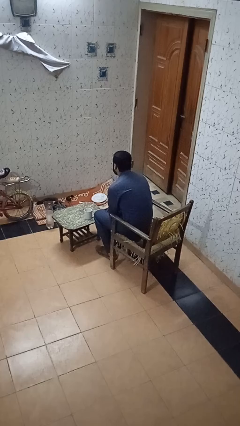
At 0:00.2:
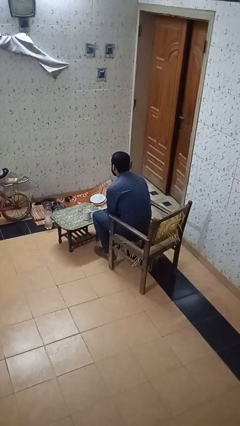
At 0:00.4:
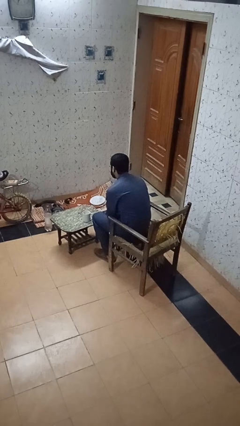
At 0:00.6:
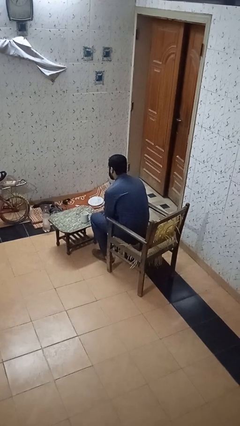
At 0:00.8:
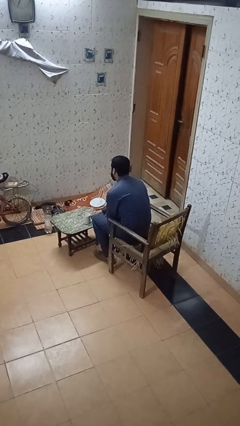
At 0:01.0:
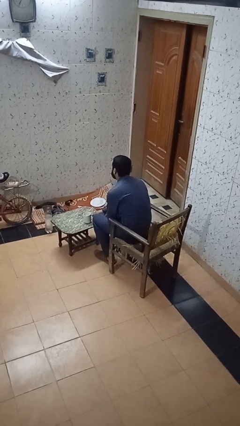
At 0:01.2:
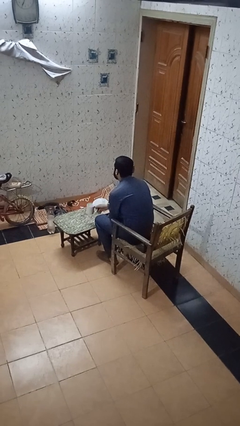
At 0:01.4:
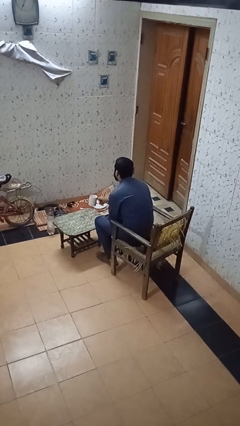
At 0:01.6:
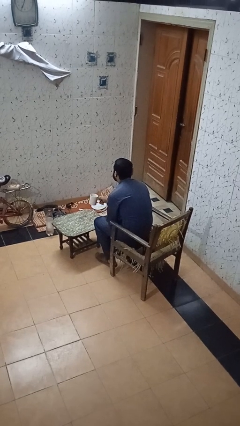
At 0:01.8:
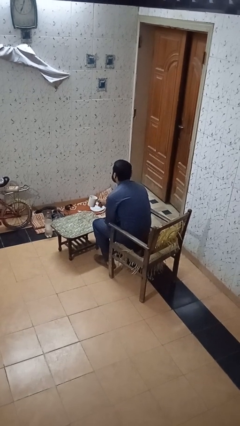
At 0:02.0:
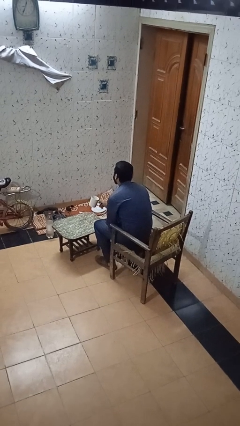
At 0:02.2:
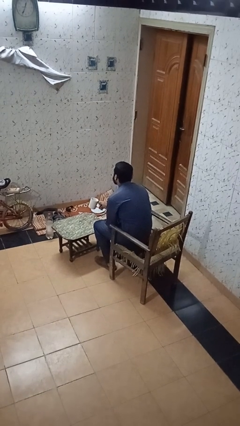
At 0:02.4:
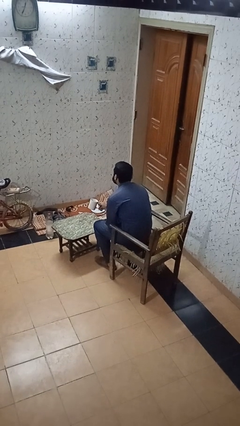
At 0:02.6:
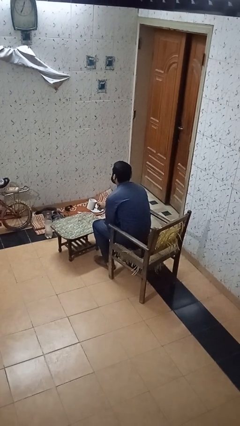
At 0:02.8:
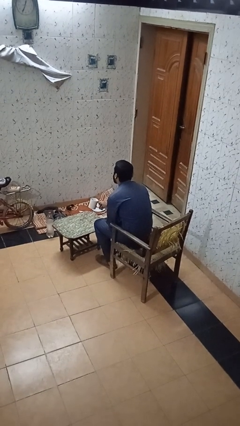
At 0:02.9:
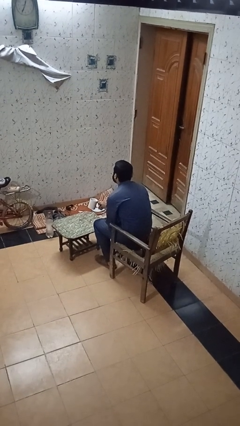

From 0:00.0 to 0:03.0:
person picks up object from table

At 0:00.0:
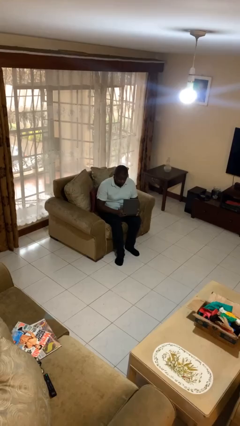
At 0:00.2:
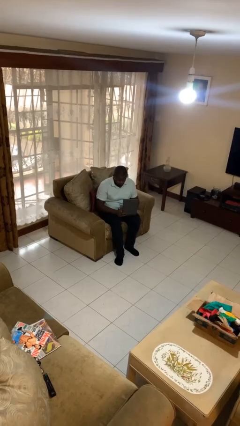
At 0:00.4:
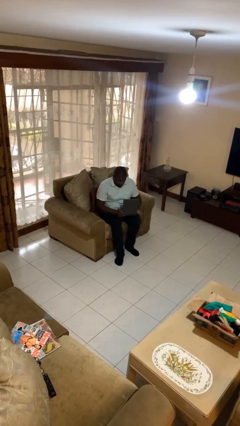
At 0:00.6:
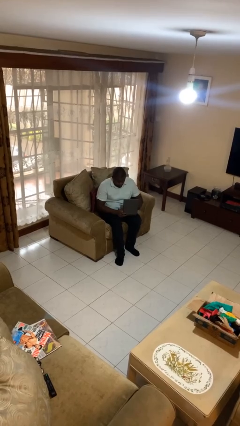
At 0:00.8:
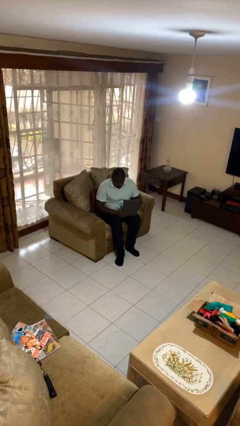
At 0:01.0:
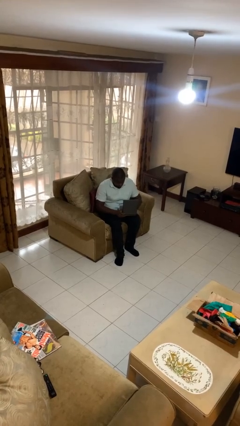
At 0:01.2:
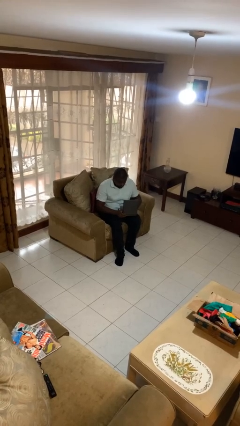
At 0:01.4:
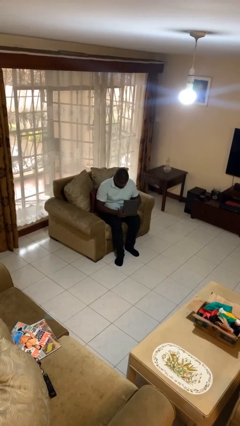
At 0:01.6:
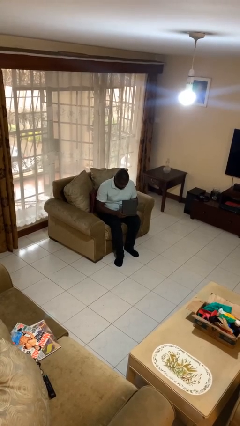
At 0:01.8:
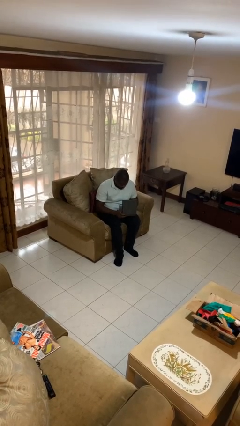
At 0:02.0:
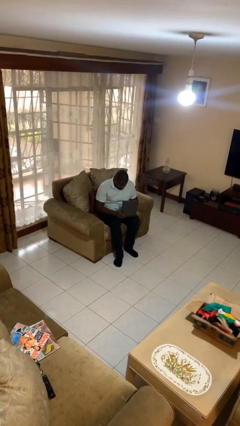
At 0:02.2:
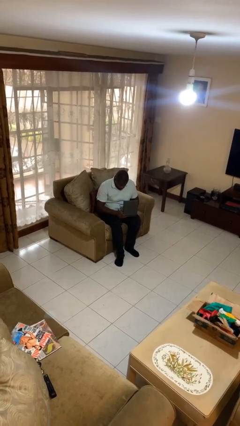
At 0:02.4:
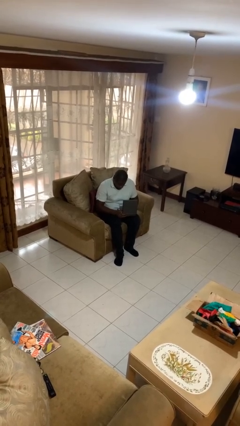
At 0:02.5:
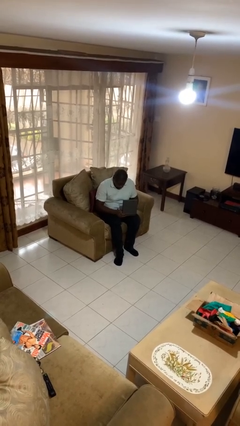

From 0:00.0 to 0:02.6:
person searches jewelry box

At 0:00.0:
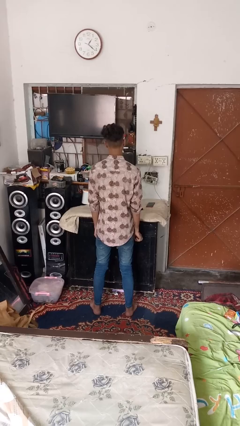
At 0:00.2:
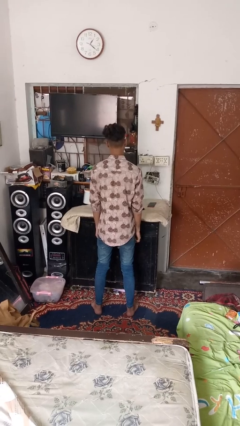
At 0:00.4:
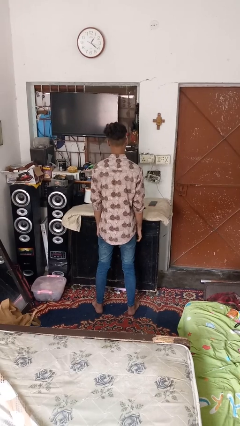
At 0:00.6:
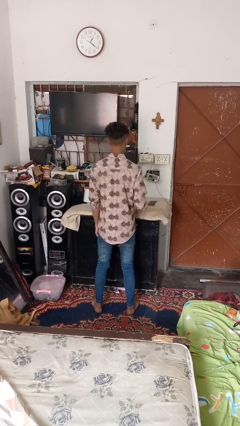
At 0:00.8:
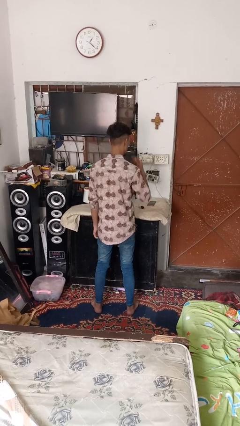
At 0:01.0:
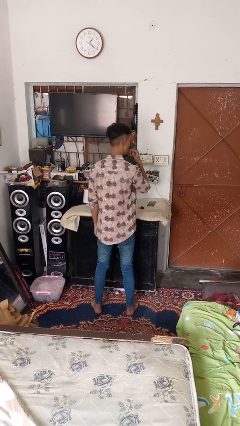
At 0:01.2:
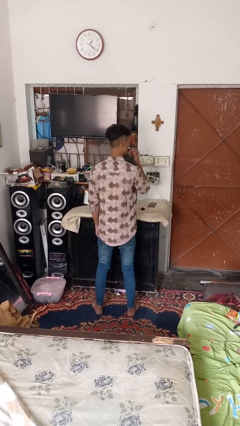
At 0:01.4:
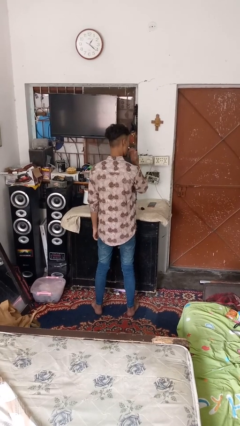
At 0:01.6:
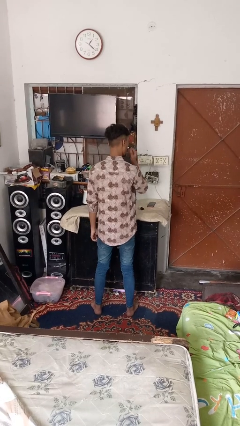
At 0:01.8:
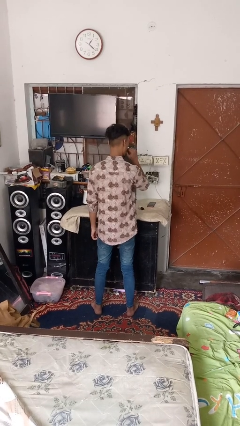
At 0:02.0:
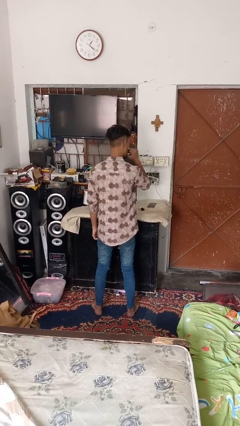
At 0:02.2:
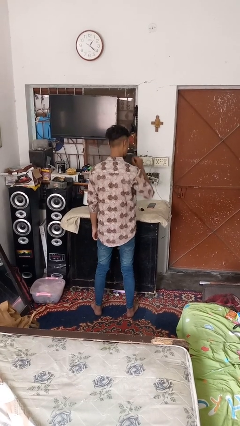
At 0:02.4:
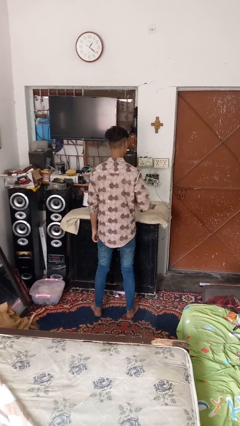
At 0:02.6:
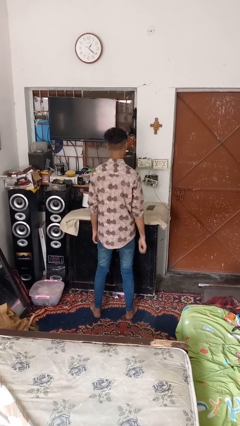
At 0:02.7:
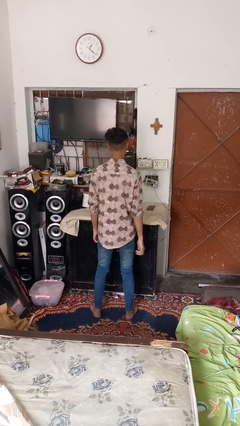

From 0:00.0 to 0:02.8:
person licks fingers

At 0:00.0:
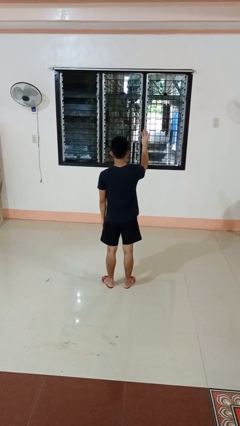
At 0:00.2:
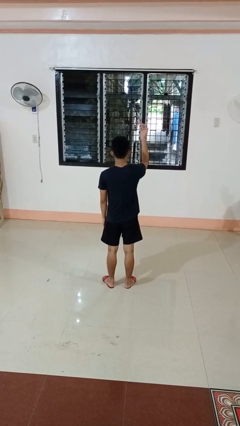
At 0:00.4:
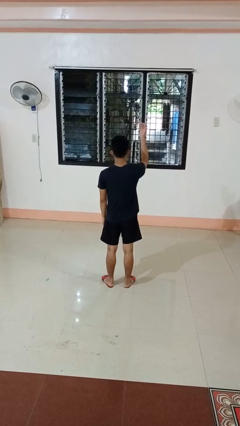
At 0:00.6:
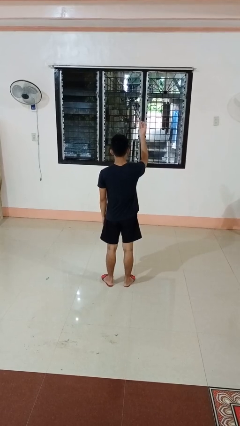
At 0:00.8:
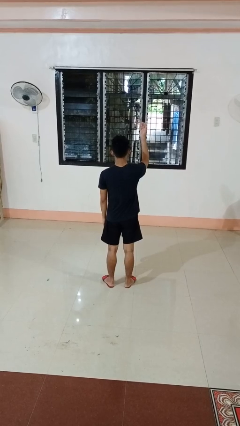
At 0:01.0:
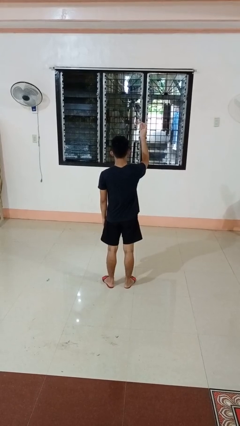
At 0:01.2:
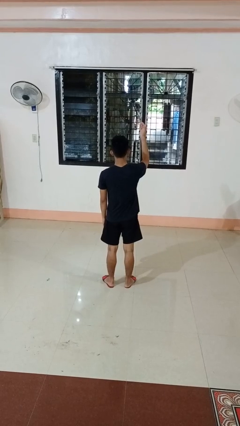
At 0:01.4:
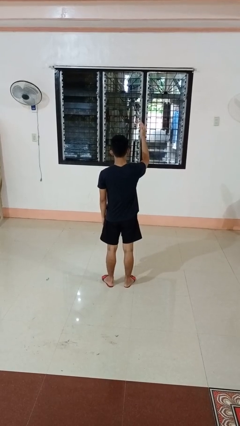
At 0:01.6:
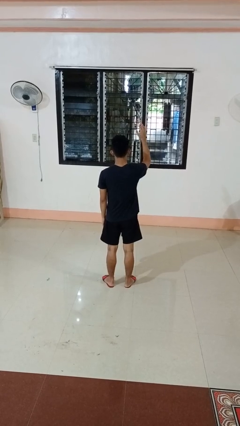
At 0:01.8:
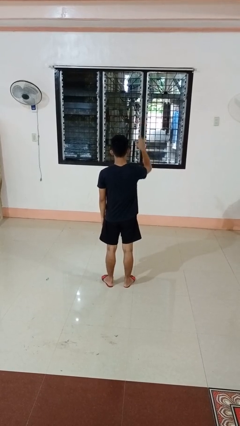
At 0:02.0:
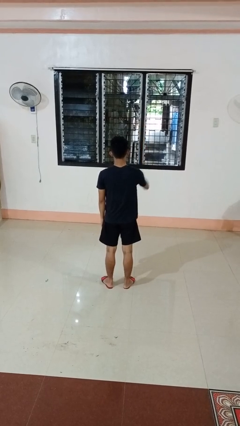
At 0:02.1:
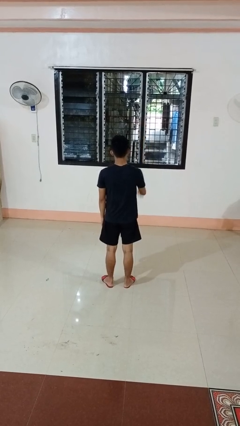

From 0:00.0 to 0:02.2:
person gestures swipe up

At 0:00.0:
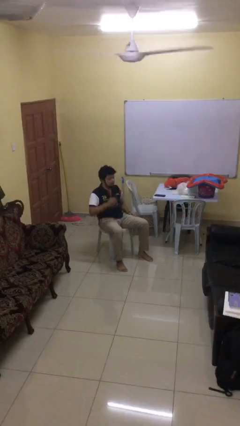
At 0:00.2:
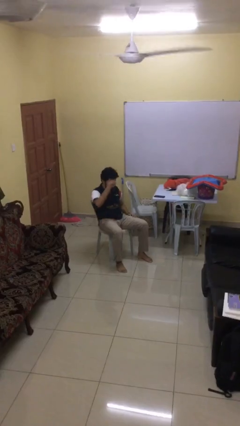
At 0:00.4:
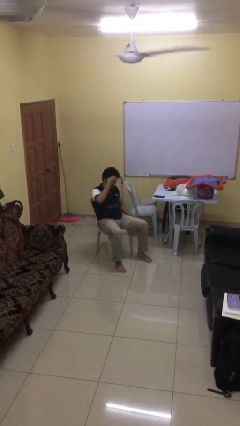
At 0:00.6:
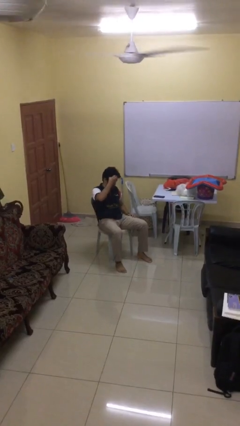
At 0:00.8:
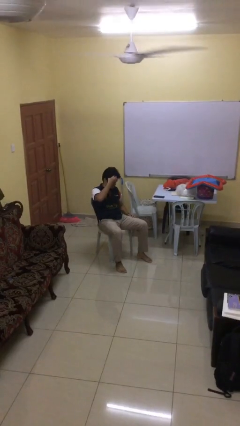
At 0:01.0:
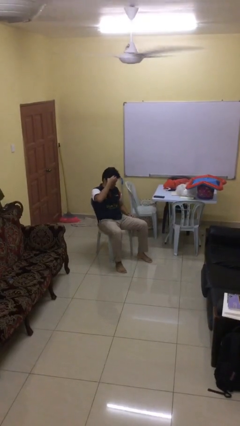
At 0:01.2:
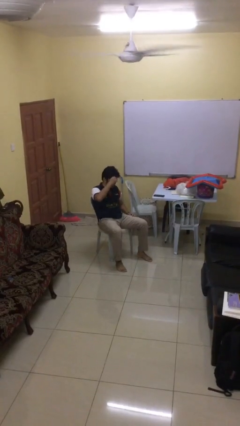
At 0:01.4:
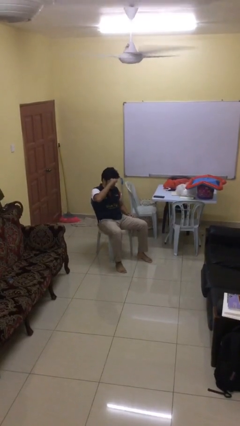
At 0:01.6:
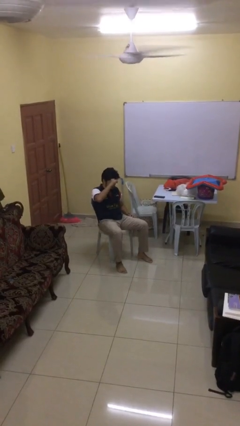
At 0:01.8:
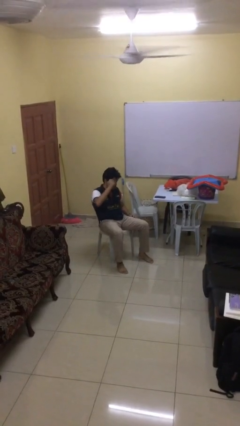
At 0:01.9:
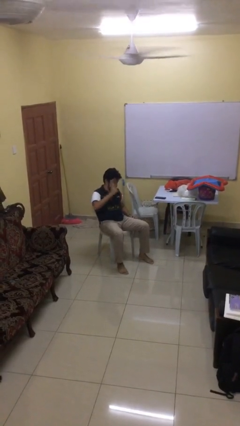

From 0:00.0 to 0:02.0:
person scratches face

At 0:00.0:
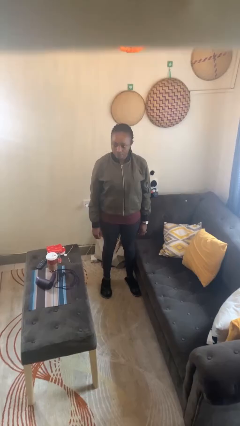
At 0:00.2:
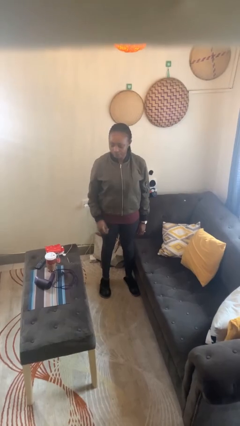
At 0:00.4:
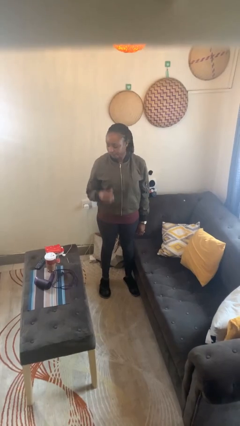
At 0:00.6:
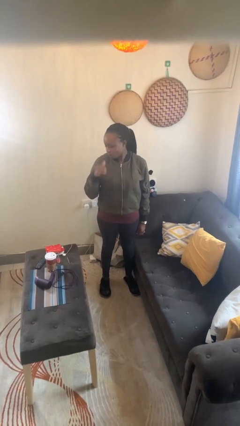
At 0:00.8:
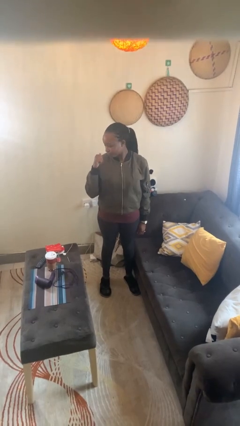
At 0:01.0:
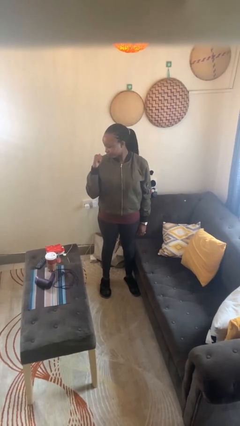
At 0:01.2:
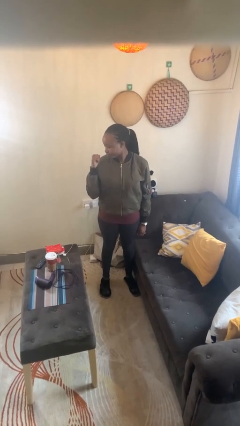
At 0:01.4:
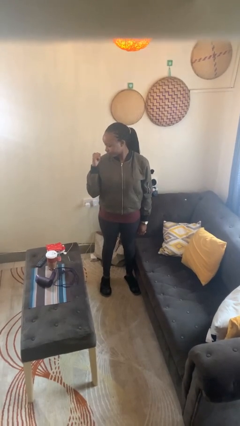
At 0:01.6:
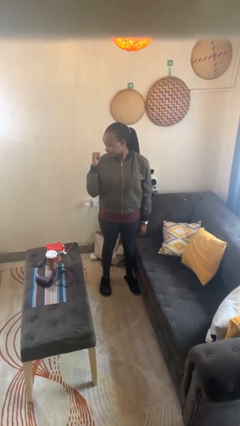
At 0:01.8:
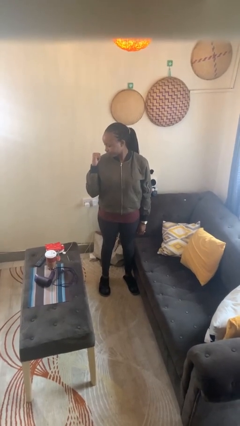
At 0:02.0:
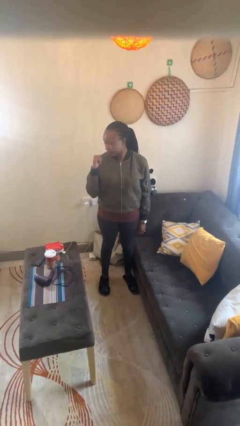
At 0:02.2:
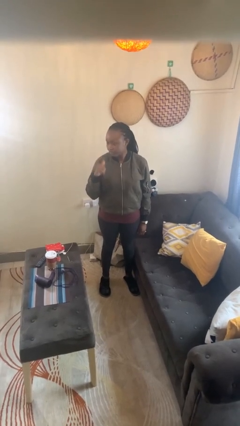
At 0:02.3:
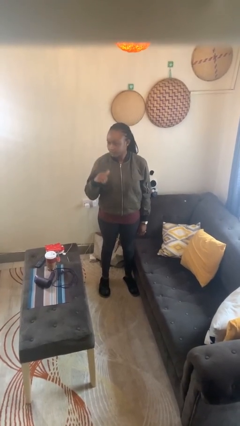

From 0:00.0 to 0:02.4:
person gestures behind me

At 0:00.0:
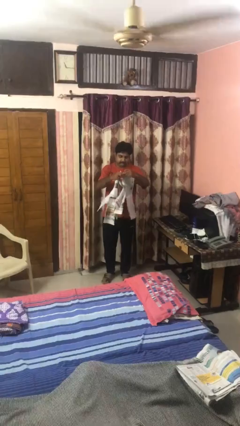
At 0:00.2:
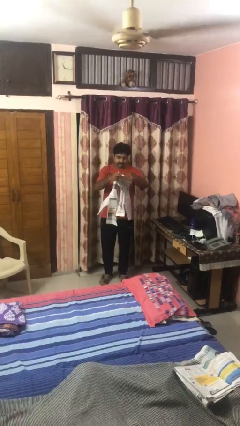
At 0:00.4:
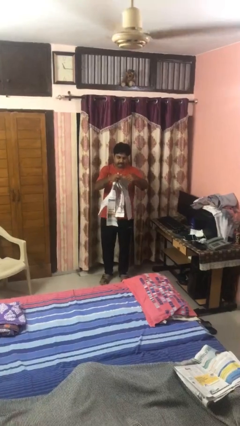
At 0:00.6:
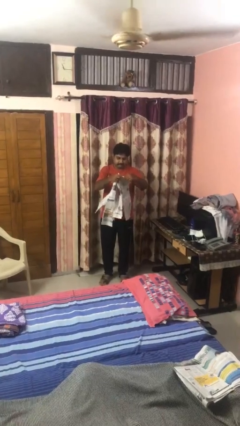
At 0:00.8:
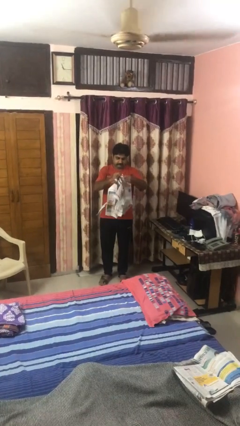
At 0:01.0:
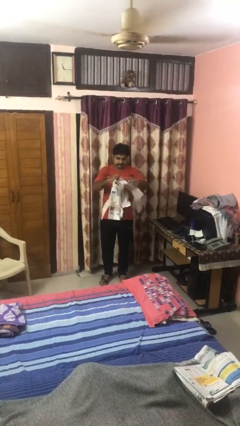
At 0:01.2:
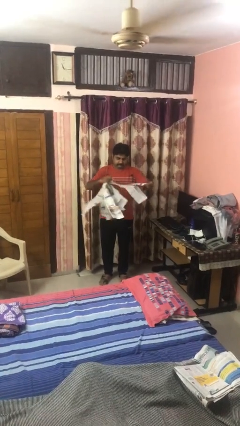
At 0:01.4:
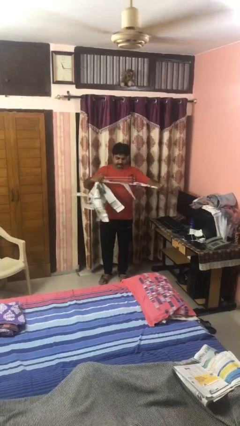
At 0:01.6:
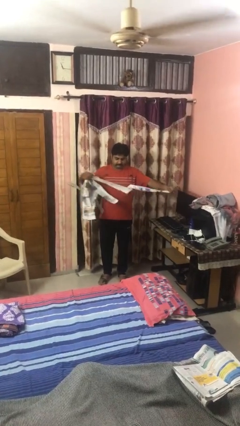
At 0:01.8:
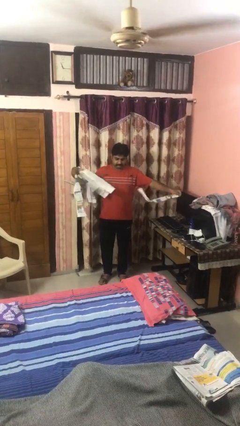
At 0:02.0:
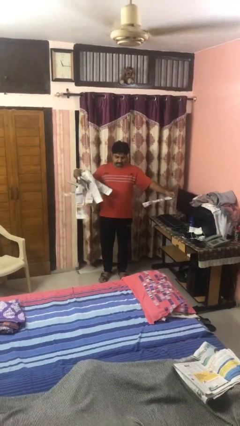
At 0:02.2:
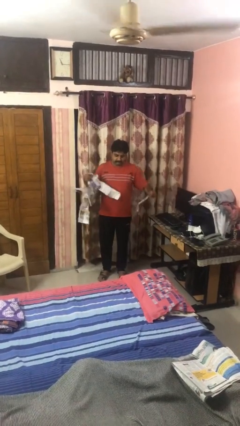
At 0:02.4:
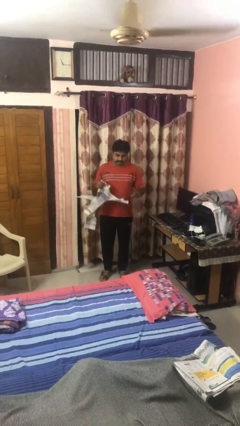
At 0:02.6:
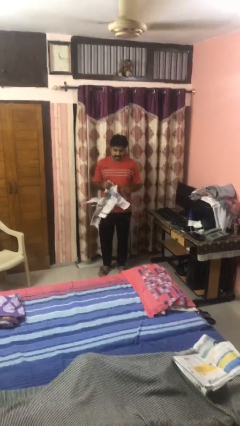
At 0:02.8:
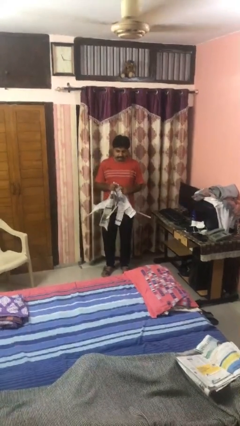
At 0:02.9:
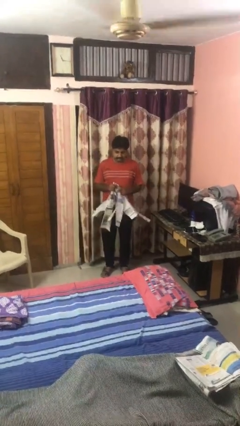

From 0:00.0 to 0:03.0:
person tears paper
